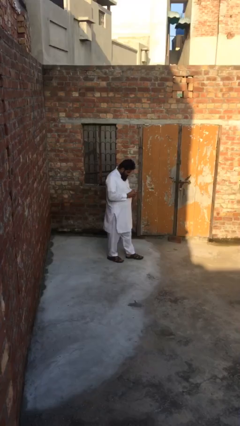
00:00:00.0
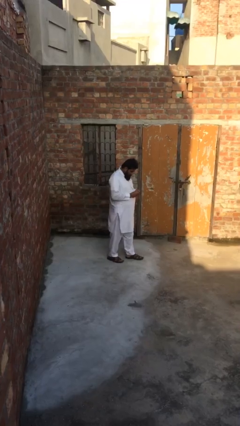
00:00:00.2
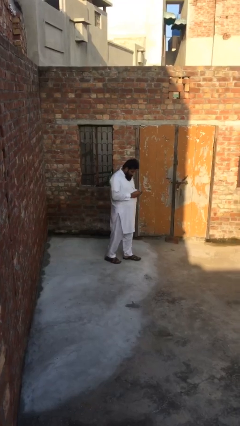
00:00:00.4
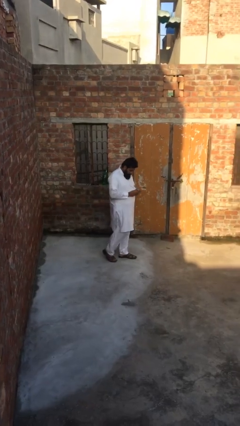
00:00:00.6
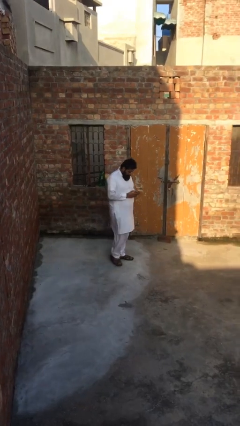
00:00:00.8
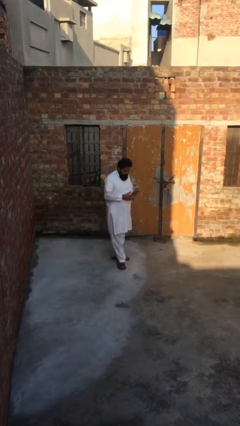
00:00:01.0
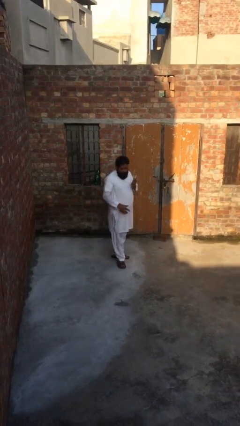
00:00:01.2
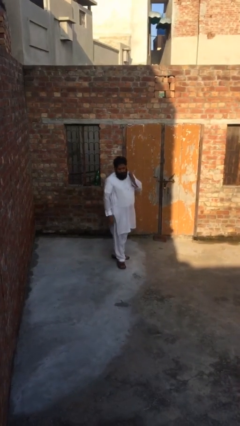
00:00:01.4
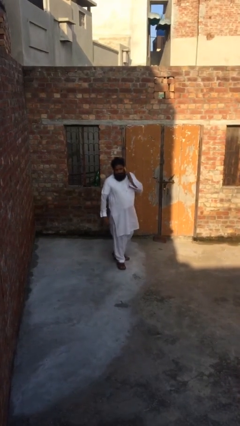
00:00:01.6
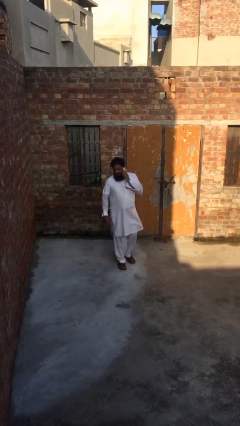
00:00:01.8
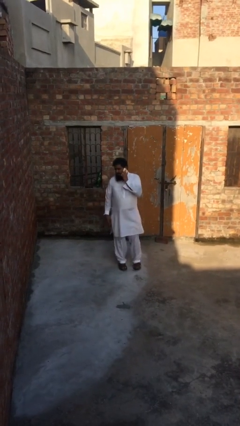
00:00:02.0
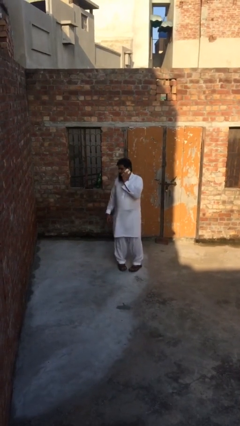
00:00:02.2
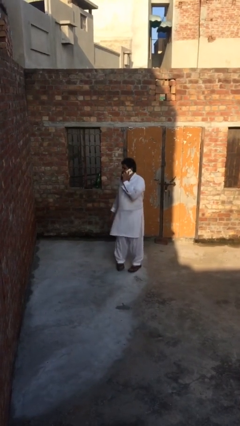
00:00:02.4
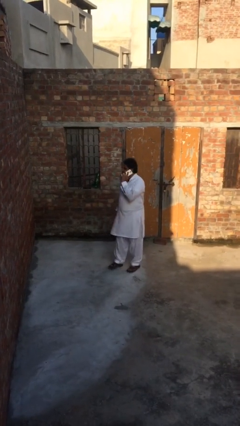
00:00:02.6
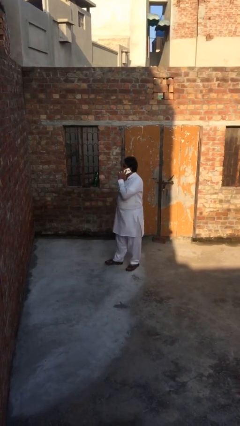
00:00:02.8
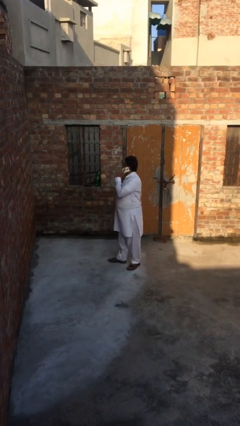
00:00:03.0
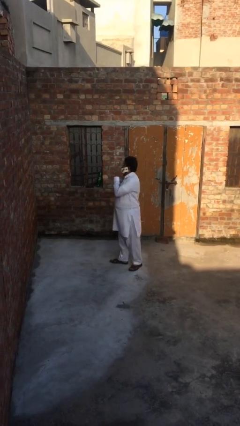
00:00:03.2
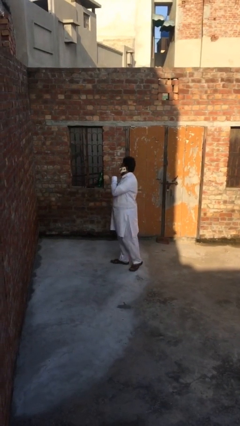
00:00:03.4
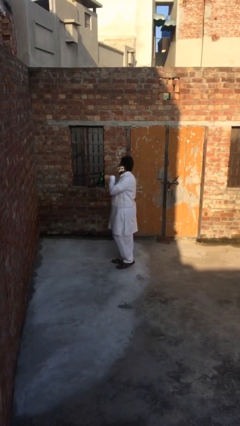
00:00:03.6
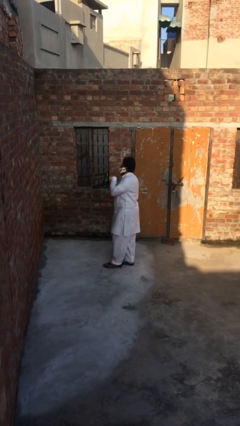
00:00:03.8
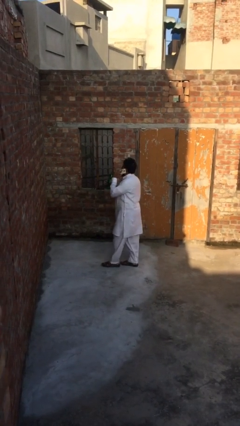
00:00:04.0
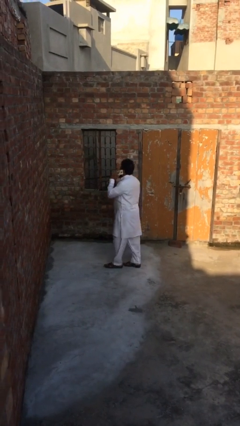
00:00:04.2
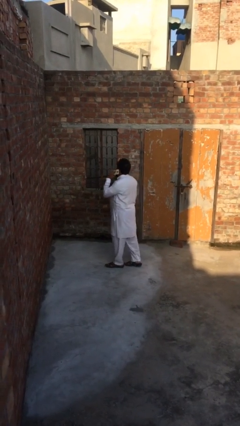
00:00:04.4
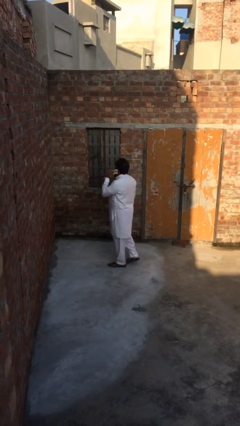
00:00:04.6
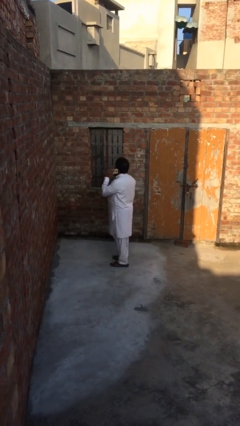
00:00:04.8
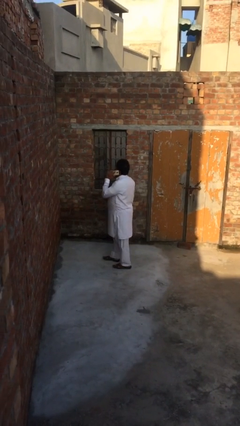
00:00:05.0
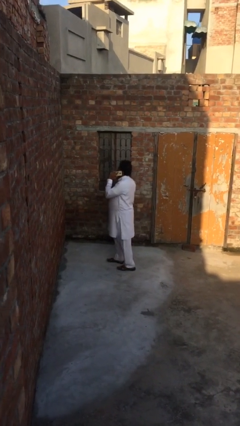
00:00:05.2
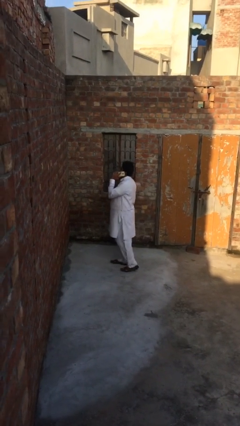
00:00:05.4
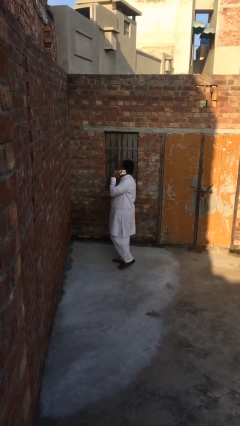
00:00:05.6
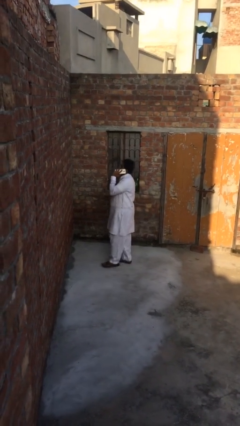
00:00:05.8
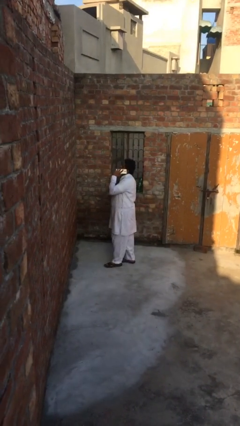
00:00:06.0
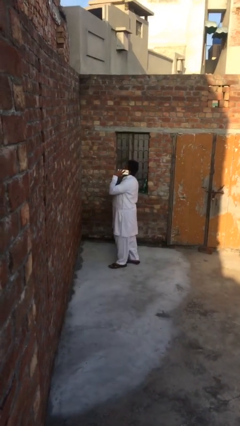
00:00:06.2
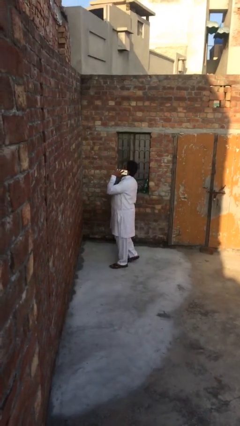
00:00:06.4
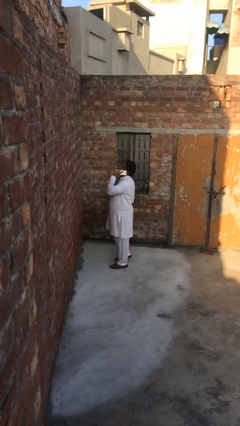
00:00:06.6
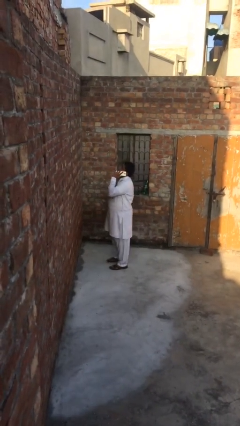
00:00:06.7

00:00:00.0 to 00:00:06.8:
person talks on phone

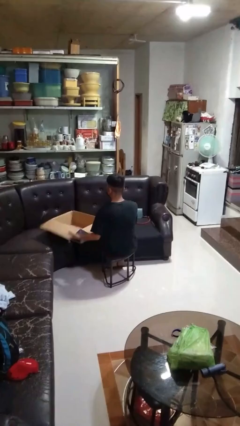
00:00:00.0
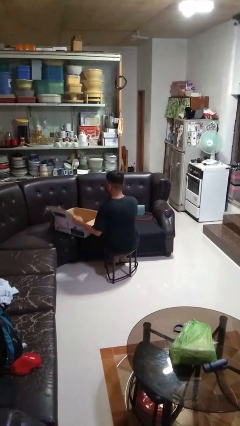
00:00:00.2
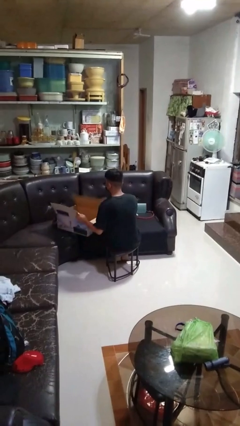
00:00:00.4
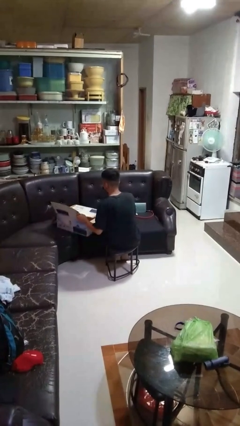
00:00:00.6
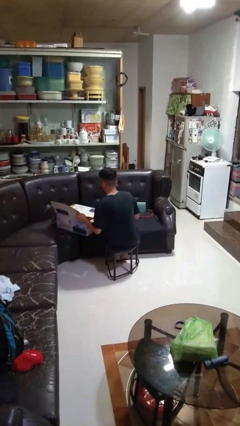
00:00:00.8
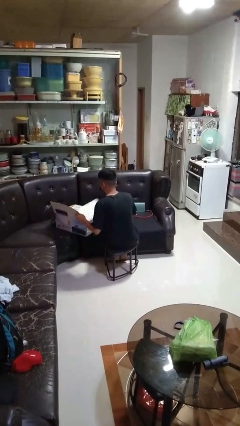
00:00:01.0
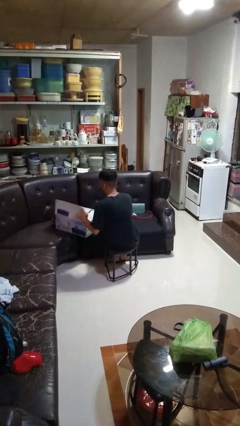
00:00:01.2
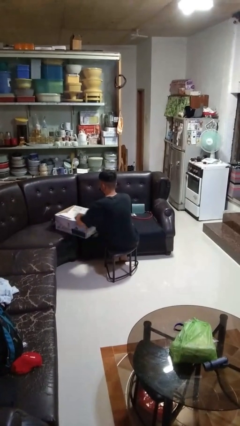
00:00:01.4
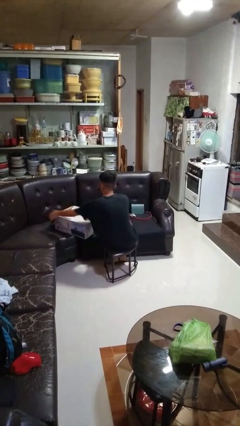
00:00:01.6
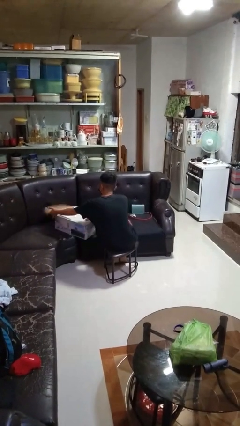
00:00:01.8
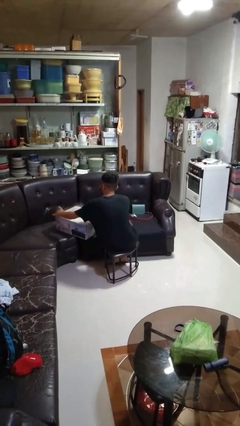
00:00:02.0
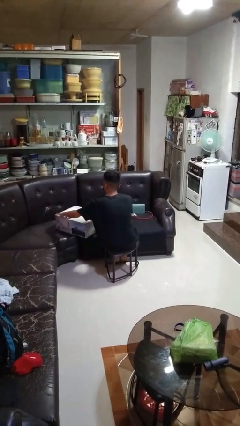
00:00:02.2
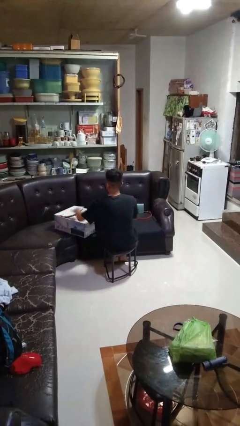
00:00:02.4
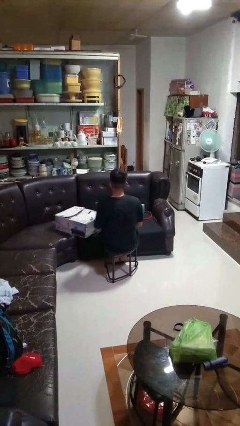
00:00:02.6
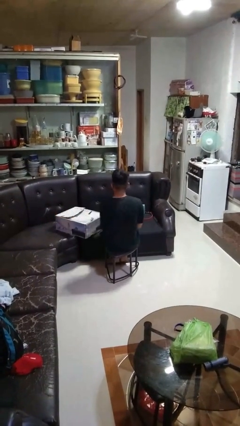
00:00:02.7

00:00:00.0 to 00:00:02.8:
person closes box

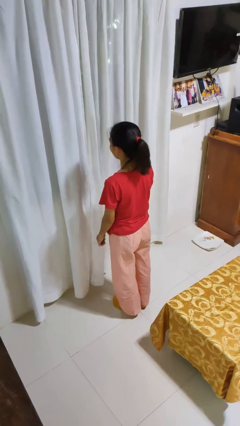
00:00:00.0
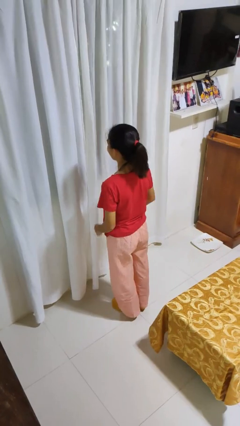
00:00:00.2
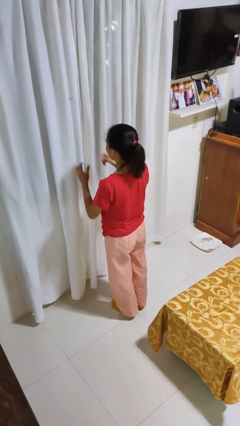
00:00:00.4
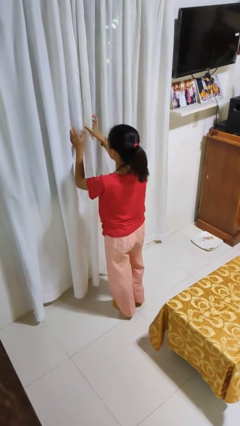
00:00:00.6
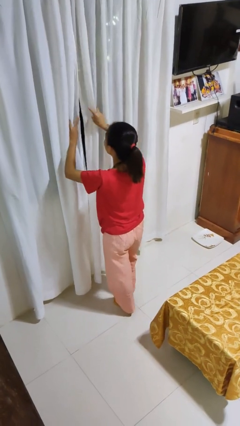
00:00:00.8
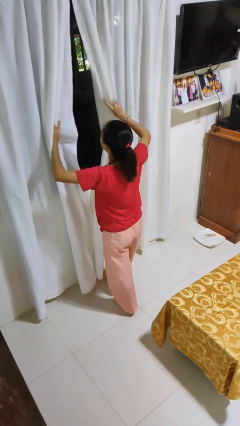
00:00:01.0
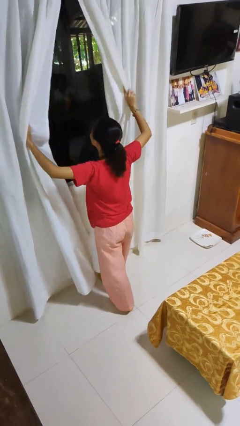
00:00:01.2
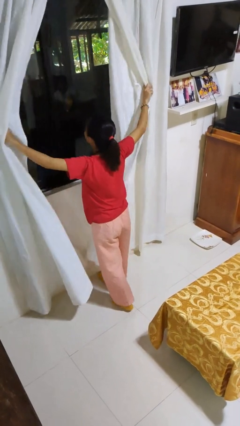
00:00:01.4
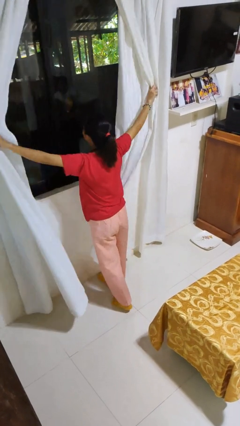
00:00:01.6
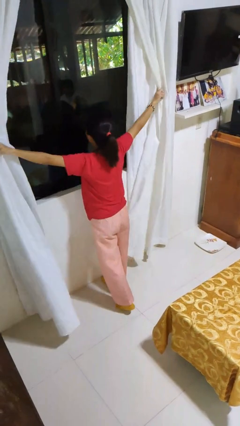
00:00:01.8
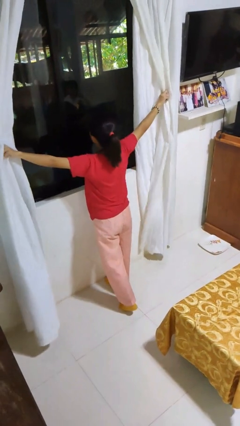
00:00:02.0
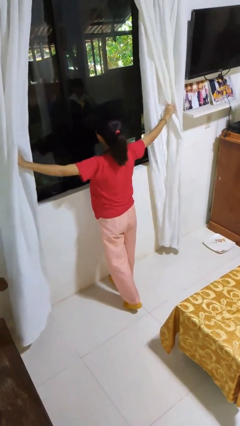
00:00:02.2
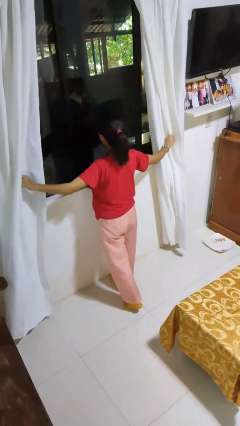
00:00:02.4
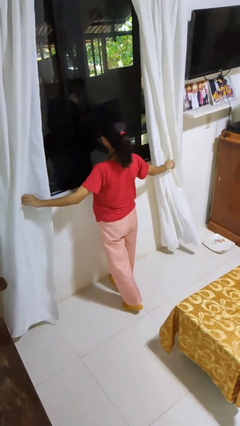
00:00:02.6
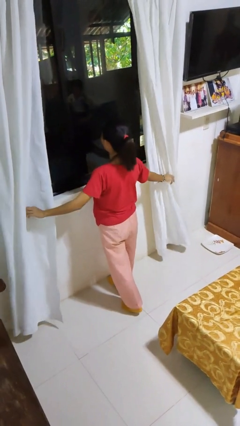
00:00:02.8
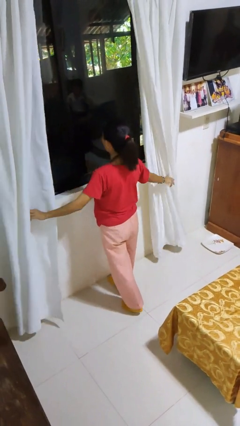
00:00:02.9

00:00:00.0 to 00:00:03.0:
person opens curtains

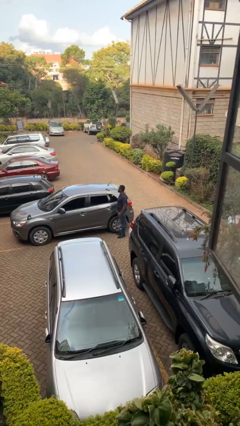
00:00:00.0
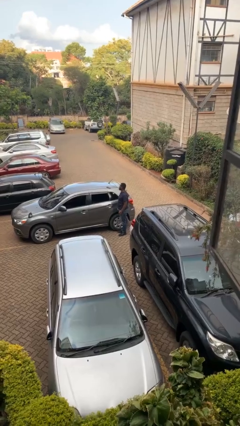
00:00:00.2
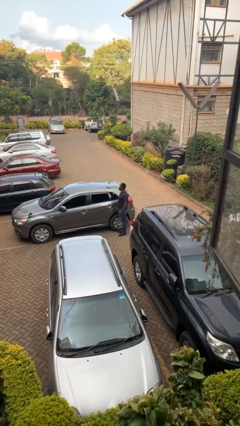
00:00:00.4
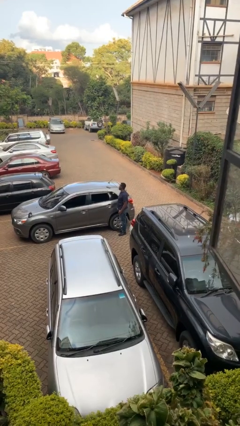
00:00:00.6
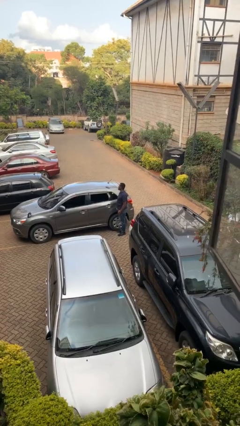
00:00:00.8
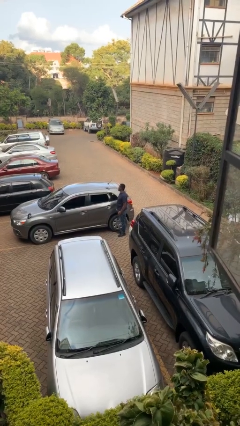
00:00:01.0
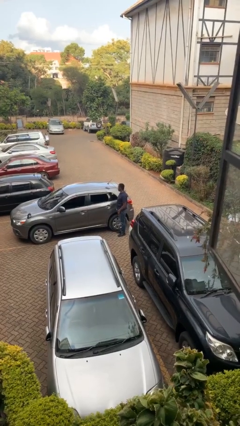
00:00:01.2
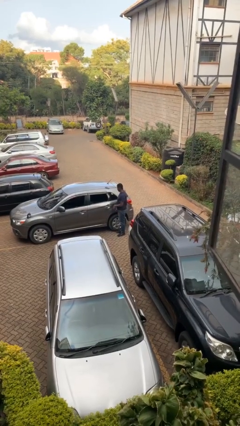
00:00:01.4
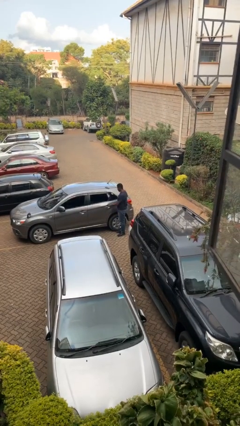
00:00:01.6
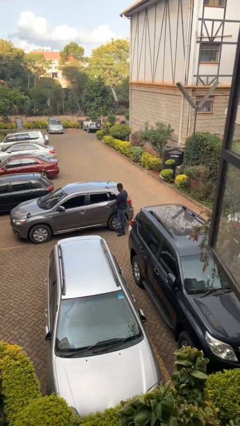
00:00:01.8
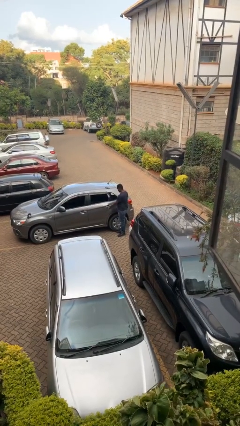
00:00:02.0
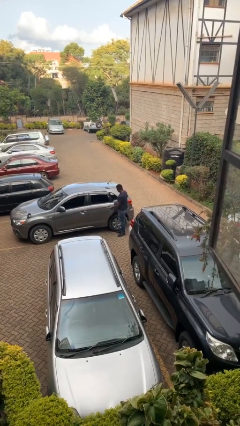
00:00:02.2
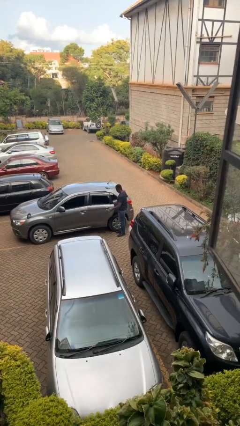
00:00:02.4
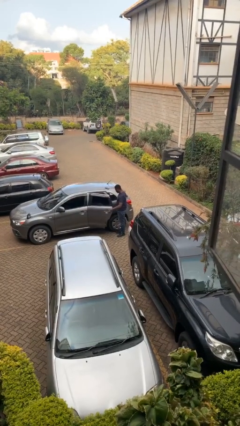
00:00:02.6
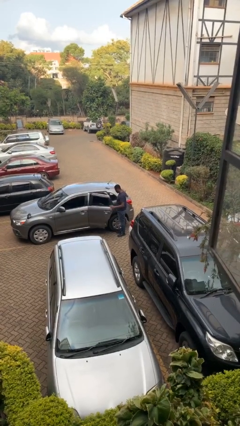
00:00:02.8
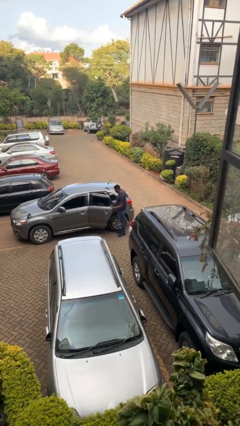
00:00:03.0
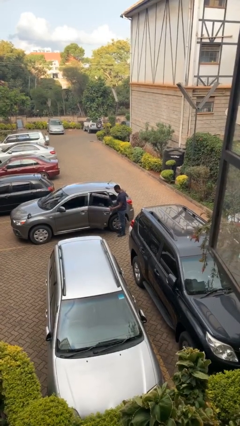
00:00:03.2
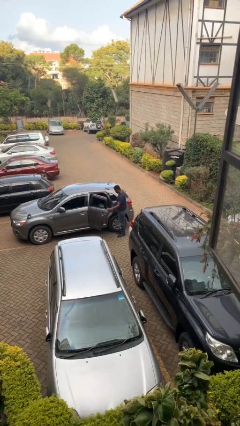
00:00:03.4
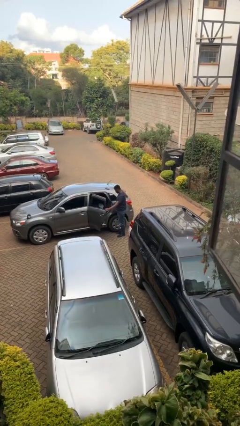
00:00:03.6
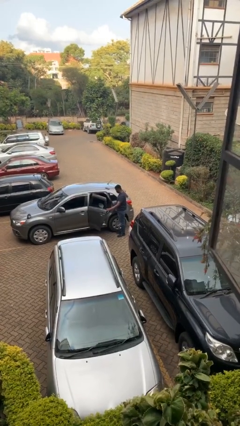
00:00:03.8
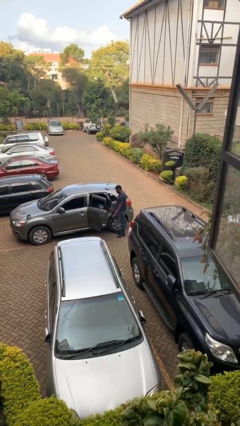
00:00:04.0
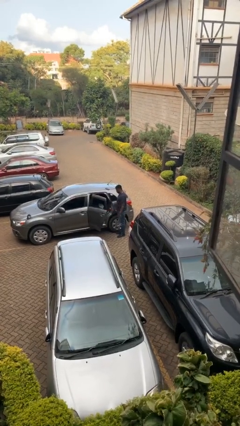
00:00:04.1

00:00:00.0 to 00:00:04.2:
person opens car door

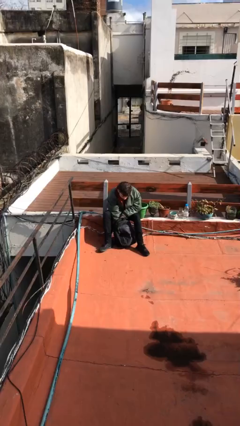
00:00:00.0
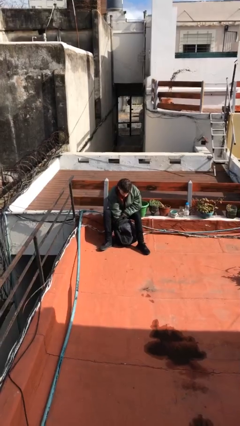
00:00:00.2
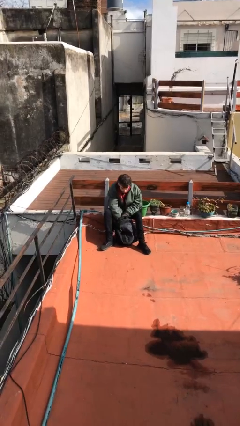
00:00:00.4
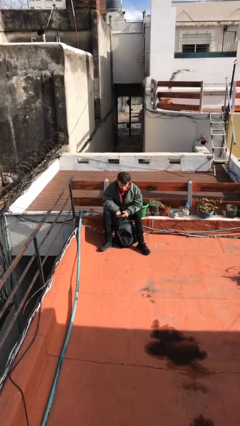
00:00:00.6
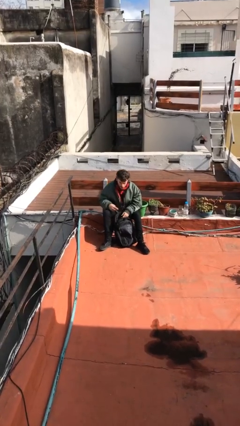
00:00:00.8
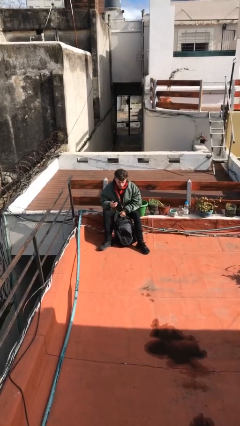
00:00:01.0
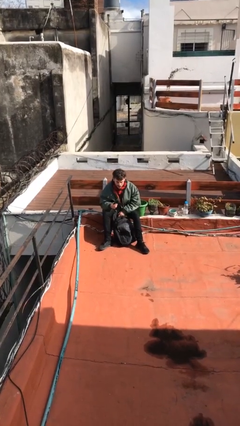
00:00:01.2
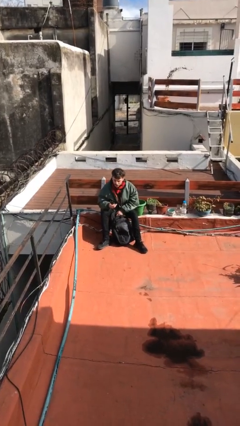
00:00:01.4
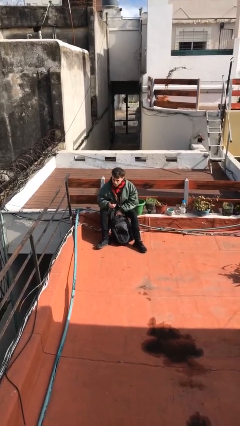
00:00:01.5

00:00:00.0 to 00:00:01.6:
person takes object from backpack
